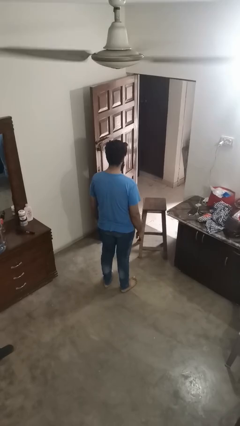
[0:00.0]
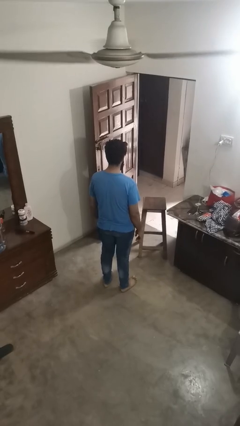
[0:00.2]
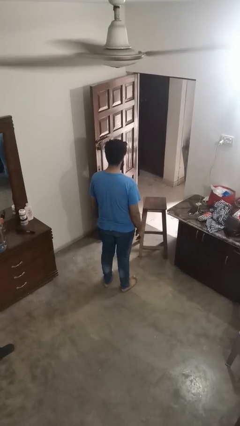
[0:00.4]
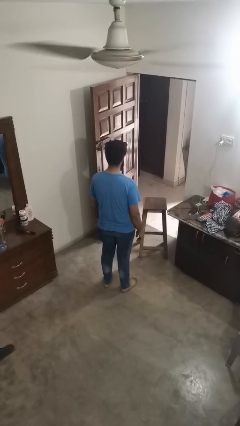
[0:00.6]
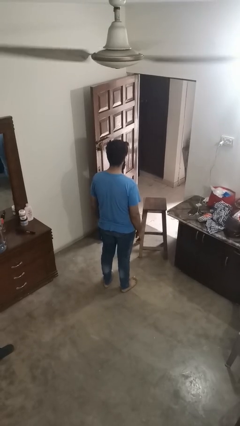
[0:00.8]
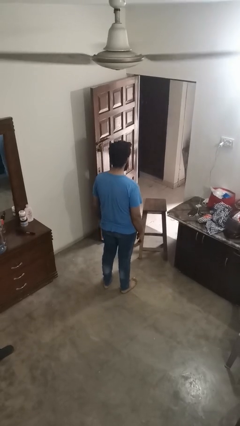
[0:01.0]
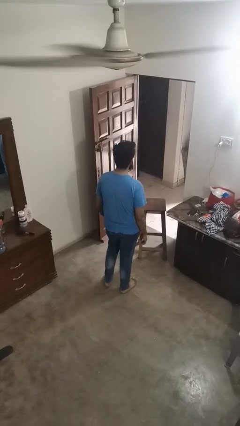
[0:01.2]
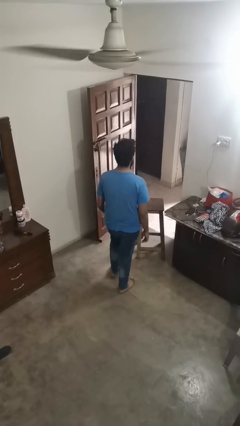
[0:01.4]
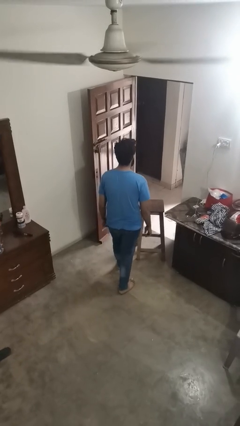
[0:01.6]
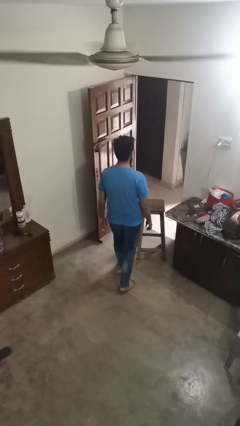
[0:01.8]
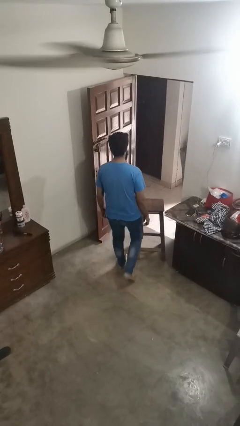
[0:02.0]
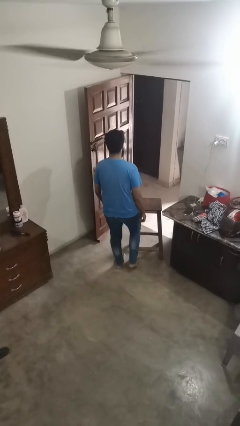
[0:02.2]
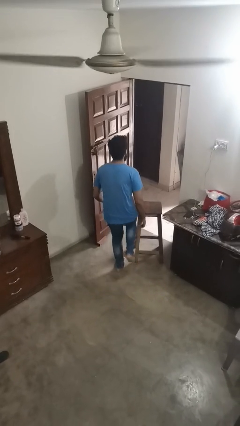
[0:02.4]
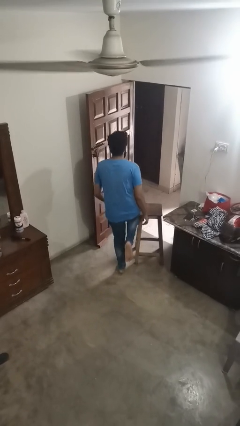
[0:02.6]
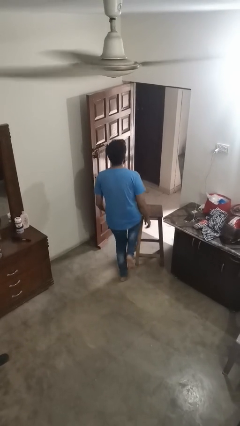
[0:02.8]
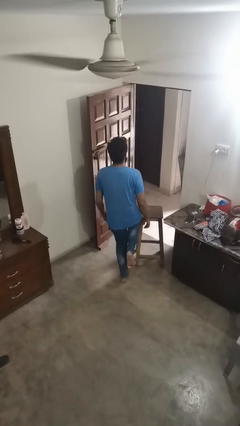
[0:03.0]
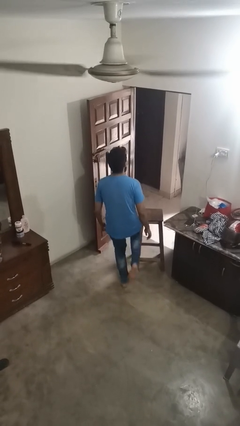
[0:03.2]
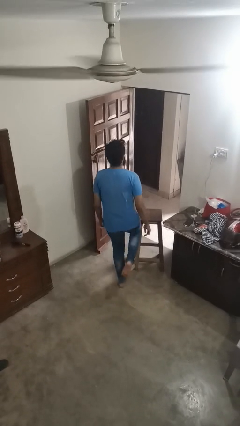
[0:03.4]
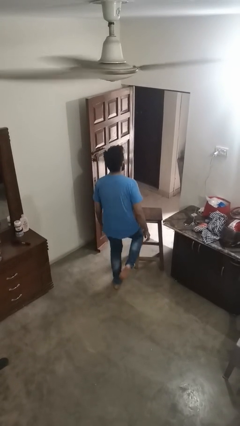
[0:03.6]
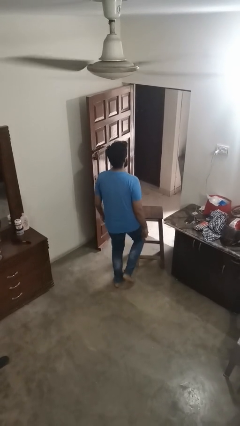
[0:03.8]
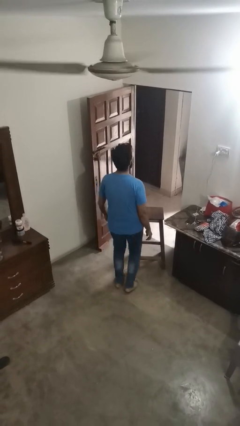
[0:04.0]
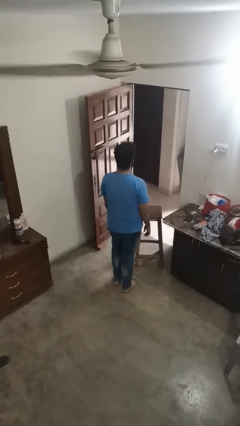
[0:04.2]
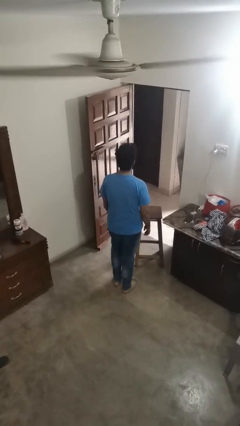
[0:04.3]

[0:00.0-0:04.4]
person stubs toe

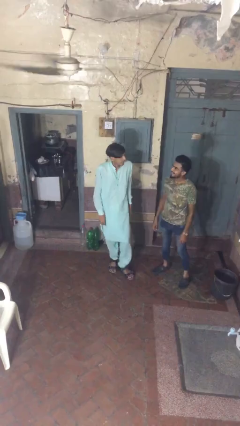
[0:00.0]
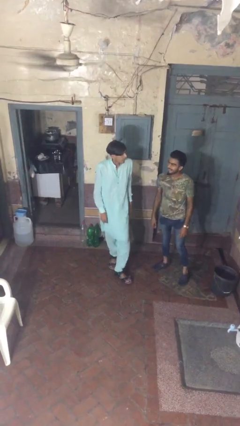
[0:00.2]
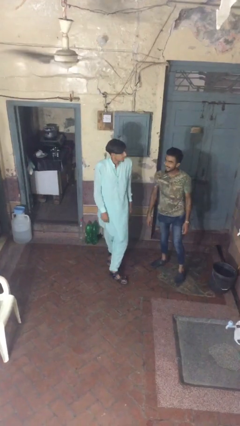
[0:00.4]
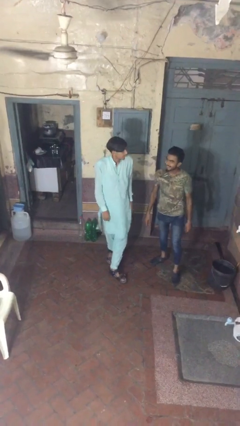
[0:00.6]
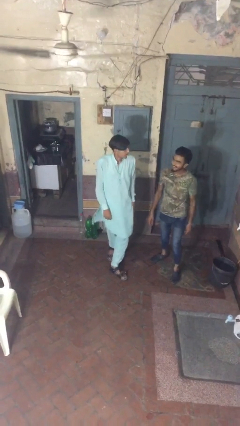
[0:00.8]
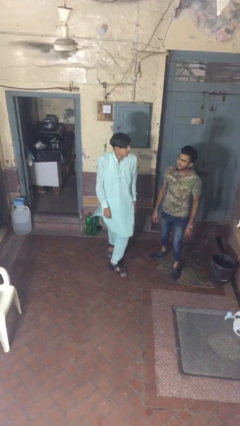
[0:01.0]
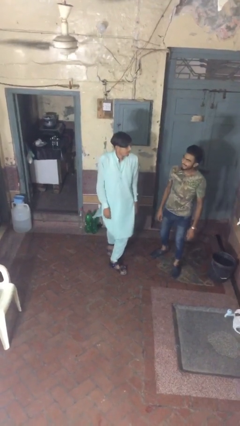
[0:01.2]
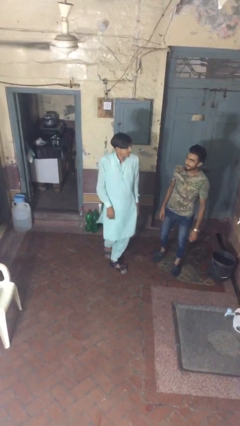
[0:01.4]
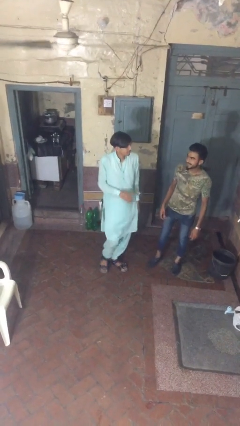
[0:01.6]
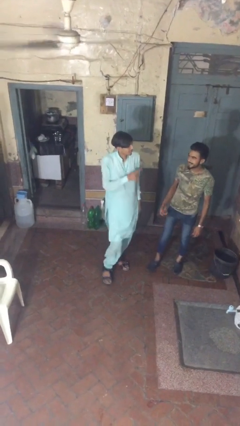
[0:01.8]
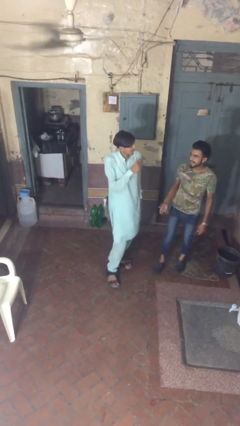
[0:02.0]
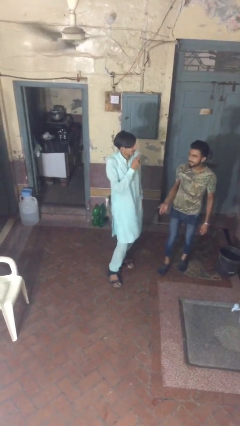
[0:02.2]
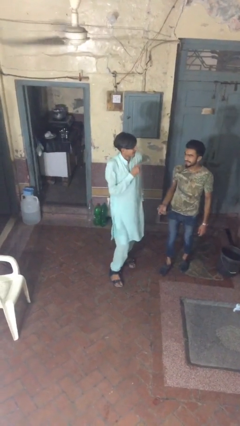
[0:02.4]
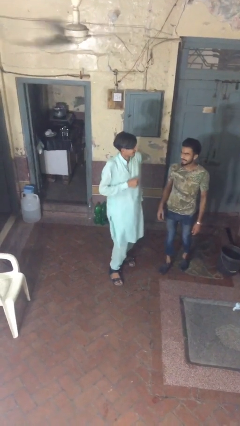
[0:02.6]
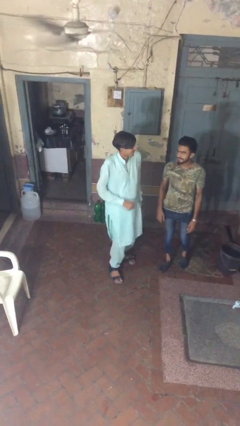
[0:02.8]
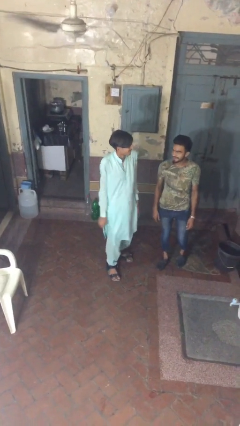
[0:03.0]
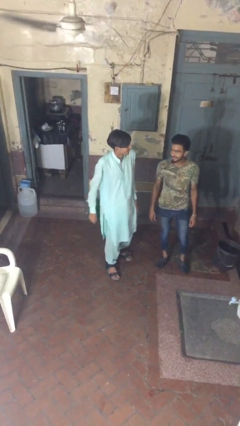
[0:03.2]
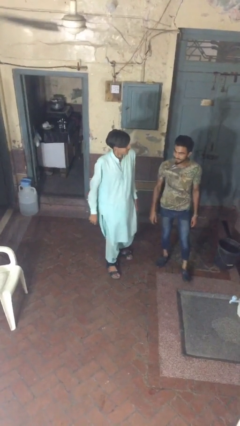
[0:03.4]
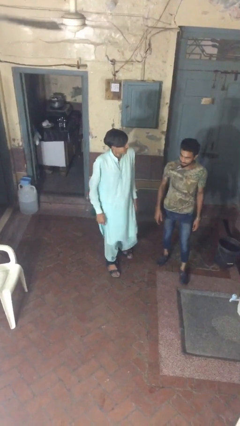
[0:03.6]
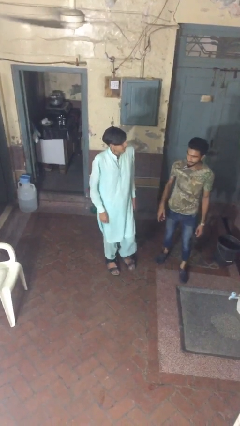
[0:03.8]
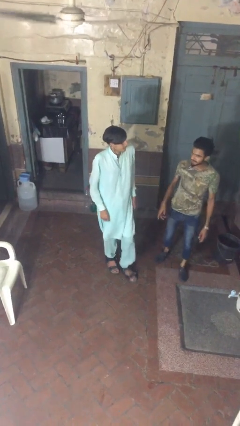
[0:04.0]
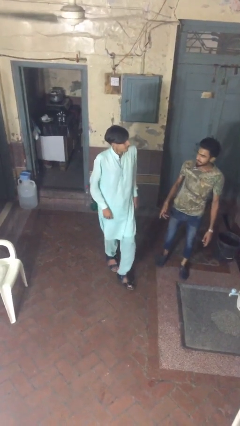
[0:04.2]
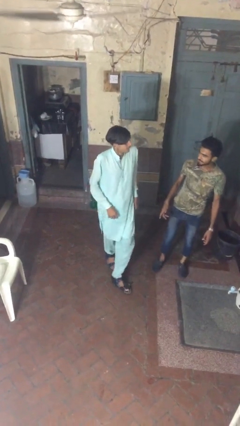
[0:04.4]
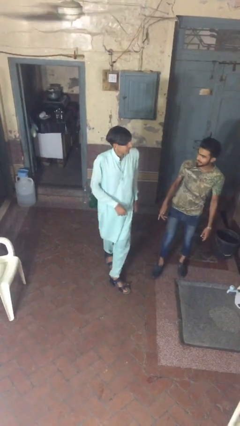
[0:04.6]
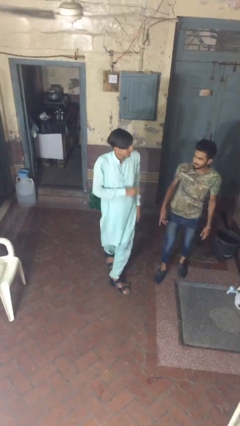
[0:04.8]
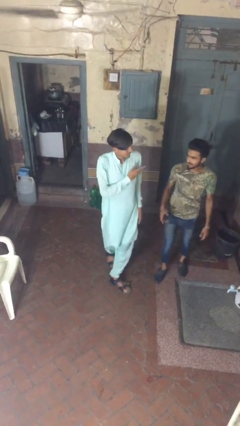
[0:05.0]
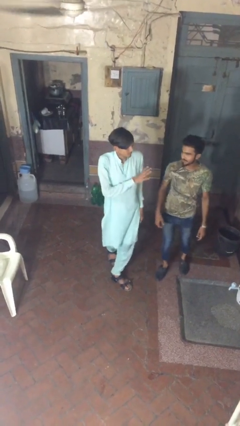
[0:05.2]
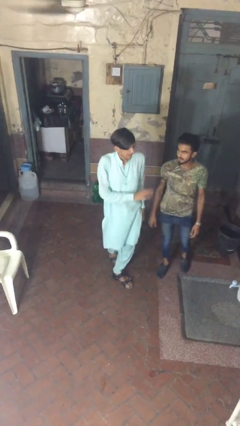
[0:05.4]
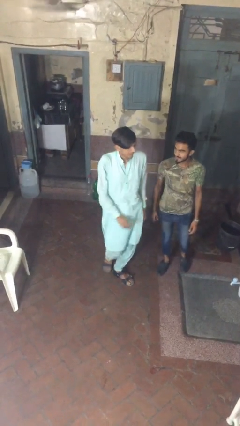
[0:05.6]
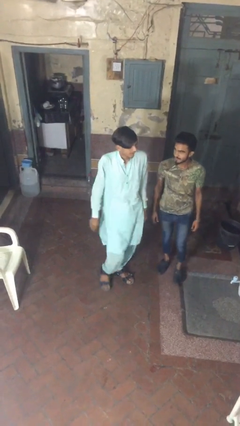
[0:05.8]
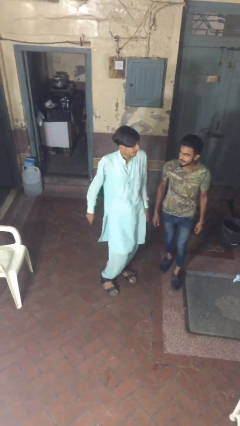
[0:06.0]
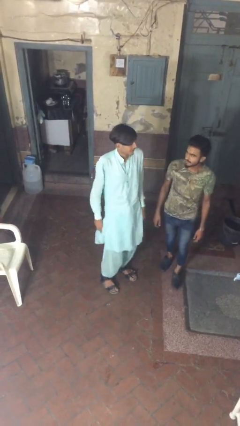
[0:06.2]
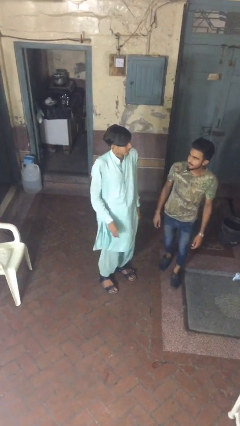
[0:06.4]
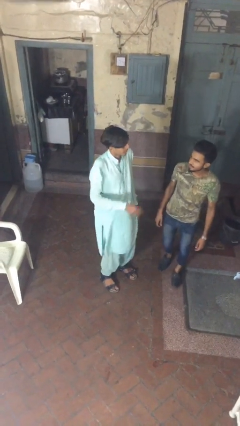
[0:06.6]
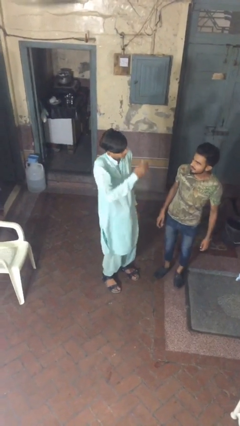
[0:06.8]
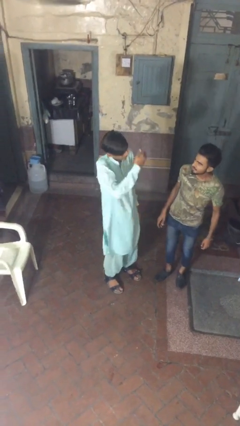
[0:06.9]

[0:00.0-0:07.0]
person talks to person

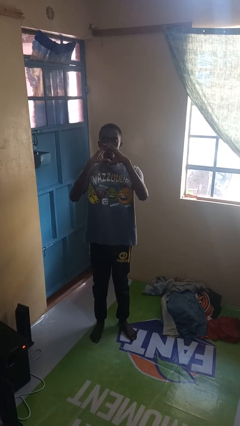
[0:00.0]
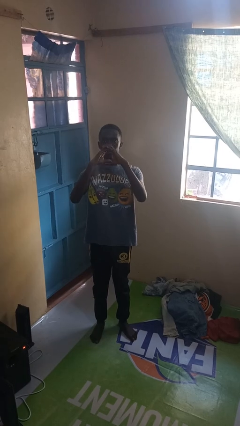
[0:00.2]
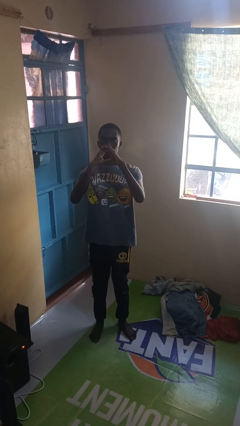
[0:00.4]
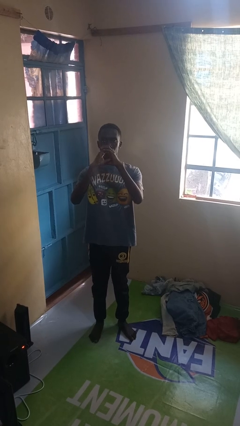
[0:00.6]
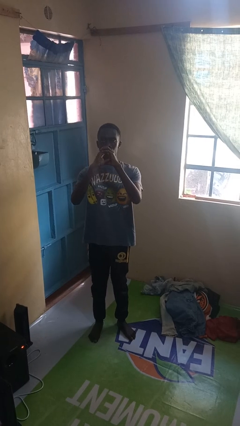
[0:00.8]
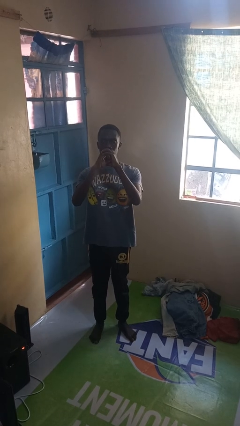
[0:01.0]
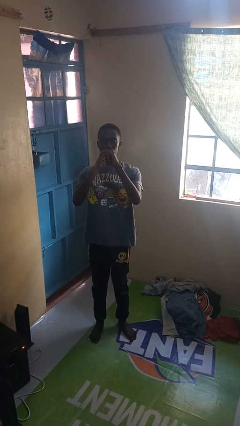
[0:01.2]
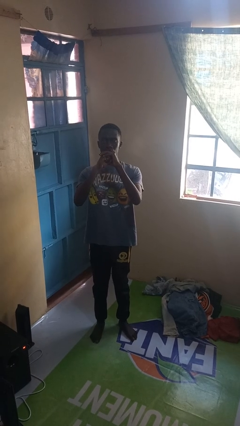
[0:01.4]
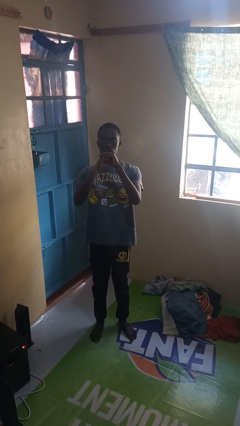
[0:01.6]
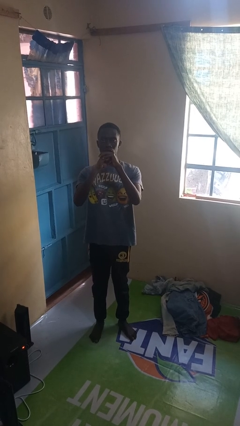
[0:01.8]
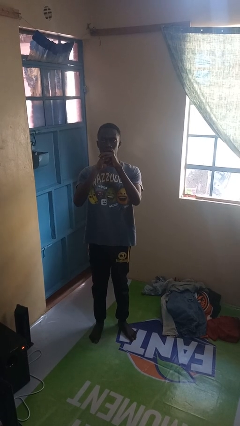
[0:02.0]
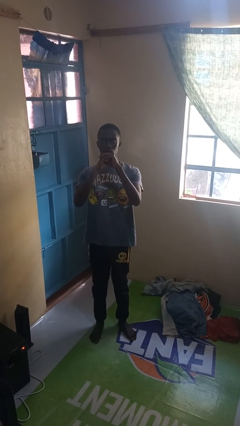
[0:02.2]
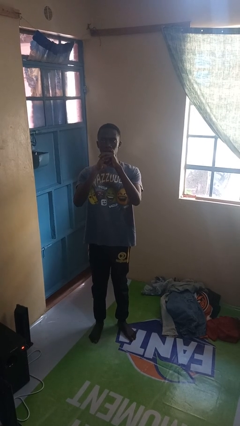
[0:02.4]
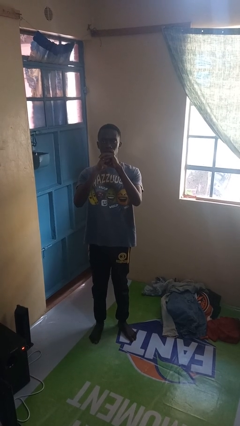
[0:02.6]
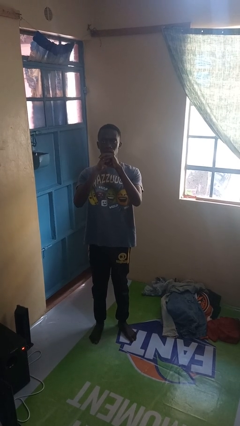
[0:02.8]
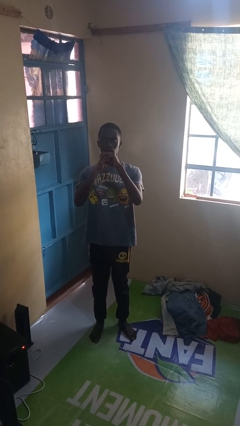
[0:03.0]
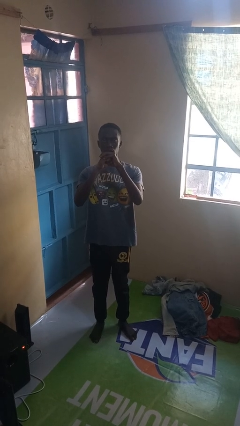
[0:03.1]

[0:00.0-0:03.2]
person gestures zoom out

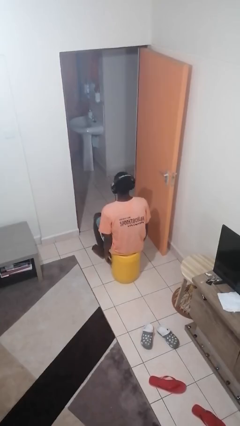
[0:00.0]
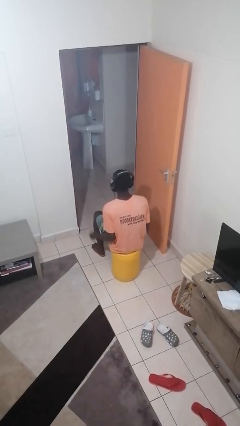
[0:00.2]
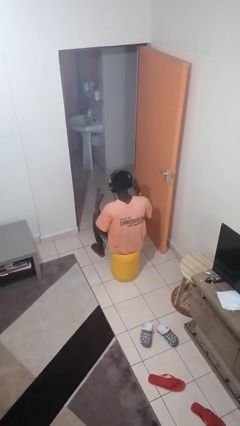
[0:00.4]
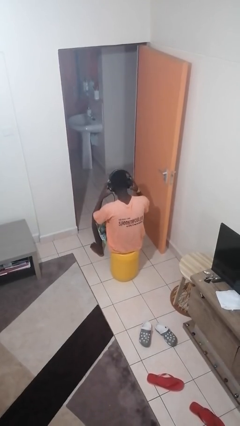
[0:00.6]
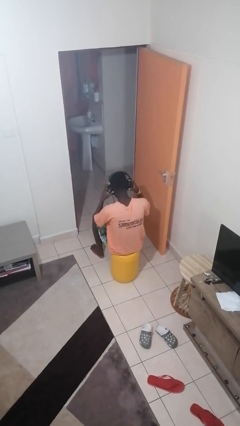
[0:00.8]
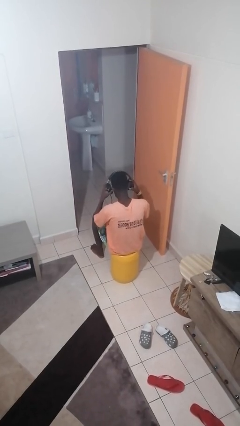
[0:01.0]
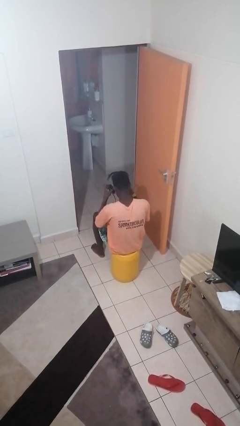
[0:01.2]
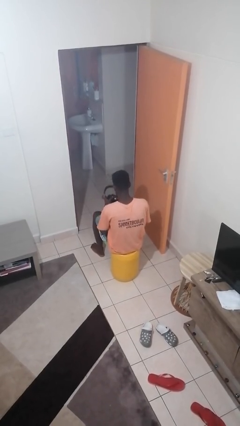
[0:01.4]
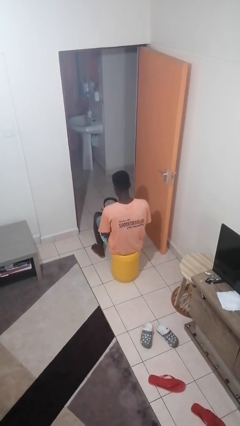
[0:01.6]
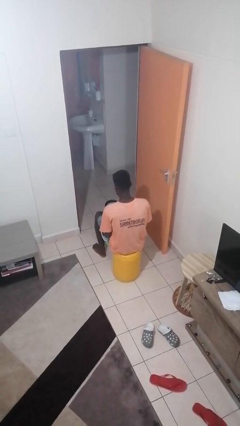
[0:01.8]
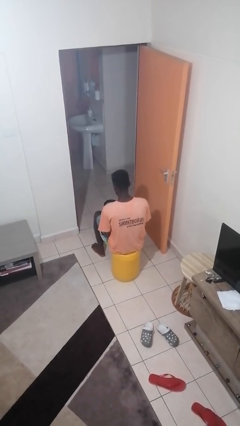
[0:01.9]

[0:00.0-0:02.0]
person takes off headphones

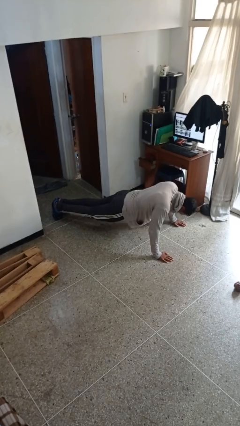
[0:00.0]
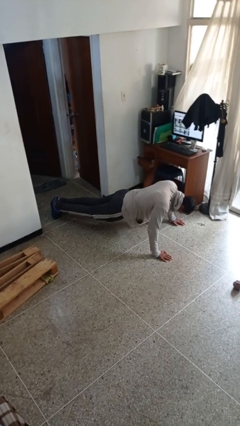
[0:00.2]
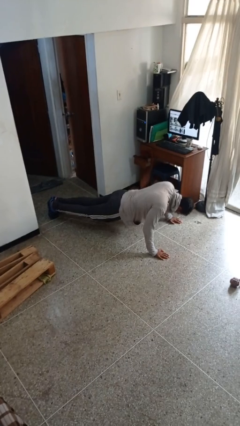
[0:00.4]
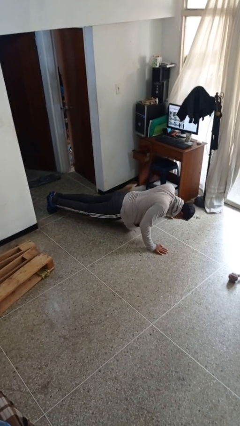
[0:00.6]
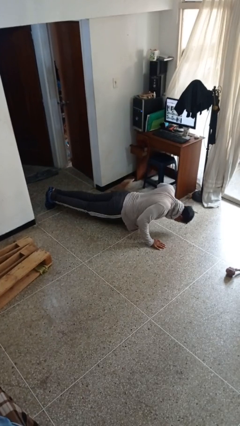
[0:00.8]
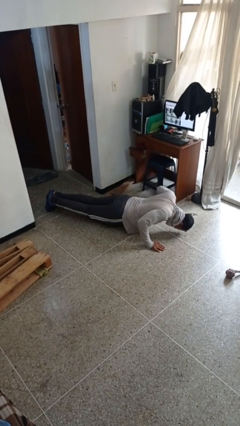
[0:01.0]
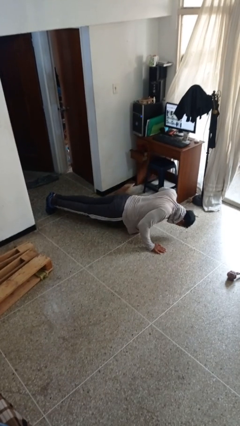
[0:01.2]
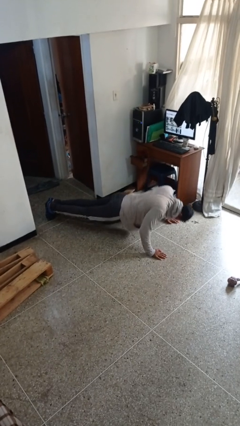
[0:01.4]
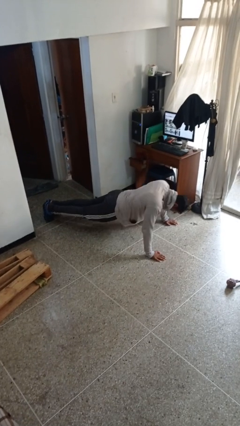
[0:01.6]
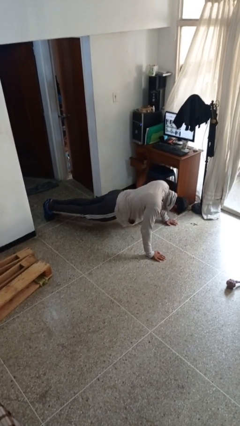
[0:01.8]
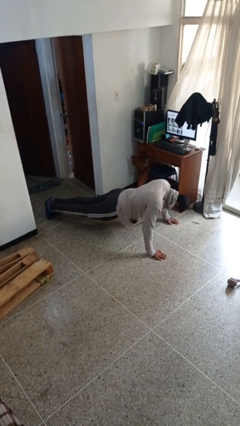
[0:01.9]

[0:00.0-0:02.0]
person exercises with pushup
